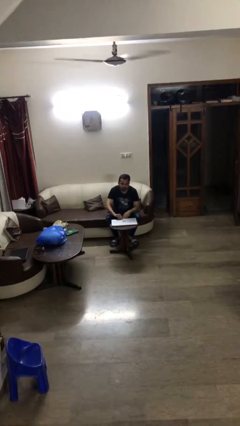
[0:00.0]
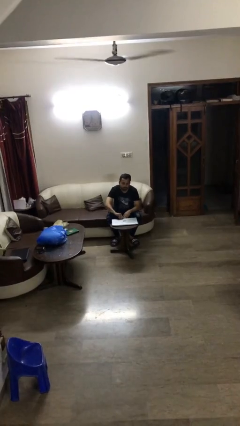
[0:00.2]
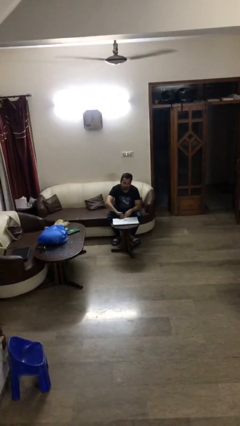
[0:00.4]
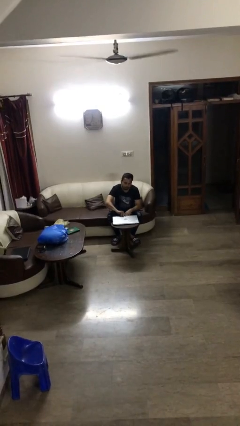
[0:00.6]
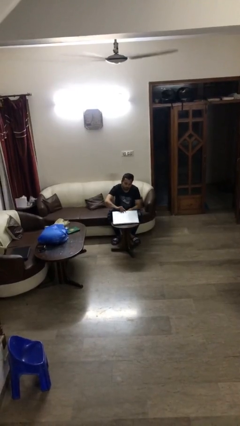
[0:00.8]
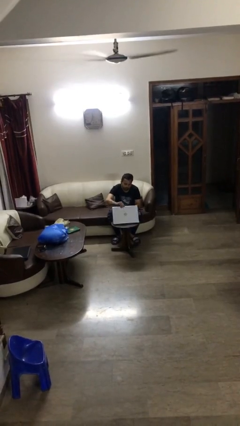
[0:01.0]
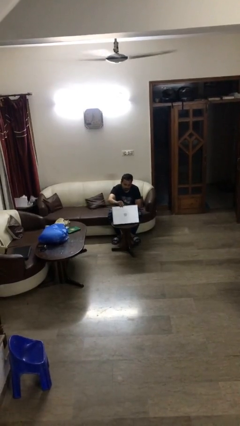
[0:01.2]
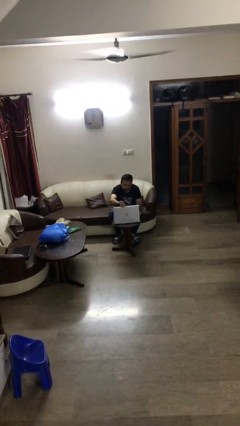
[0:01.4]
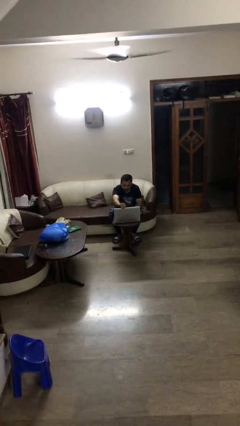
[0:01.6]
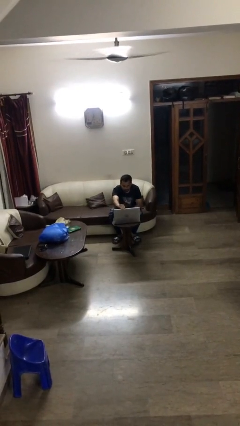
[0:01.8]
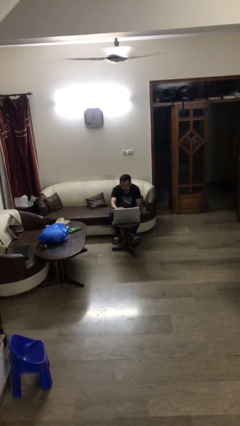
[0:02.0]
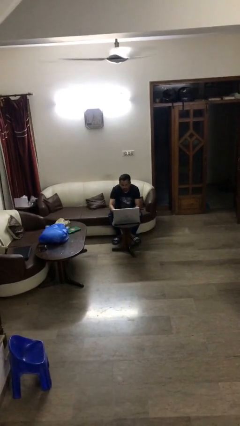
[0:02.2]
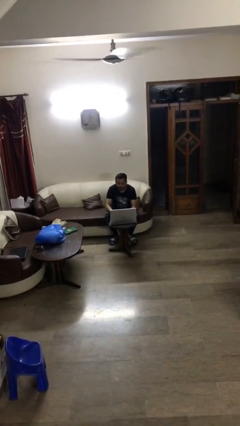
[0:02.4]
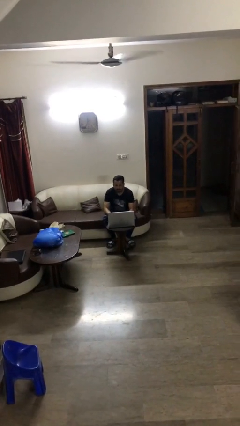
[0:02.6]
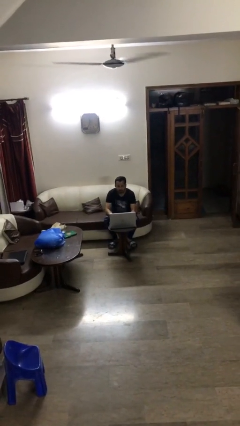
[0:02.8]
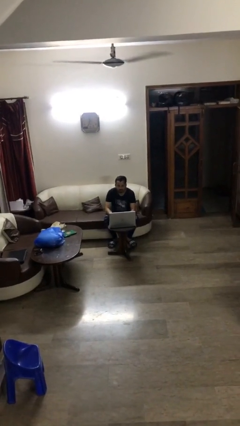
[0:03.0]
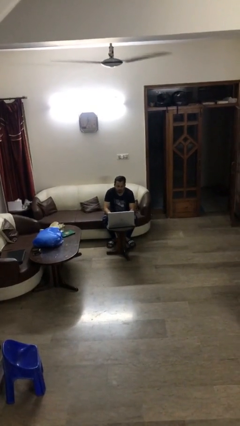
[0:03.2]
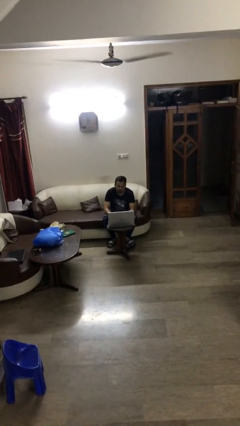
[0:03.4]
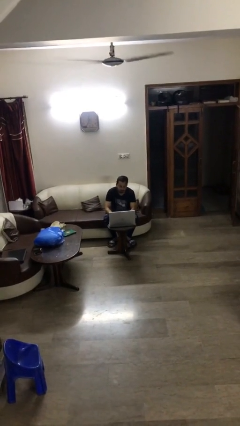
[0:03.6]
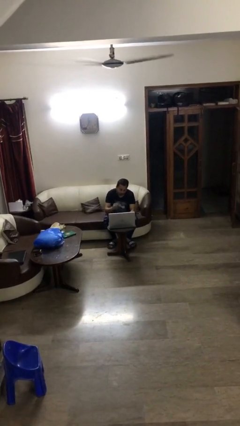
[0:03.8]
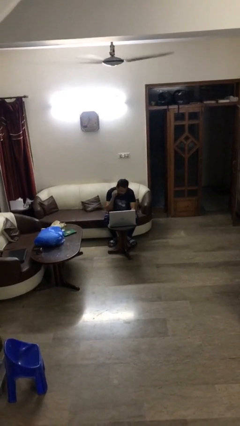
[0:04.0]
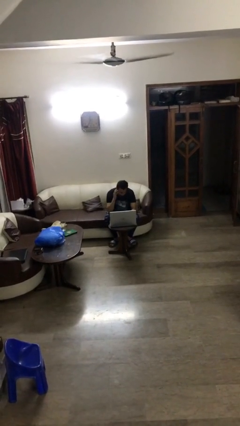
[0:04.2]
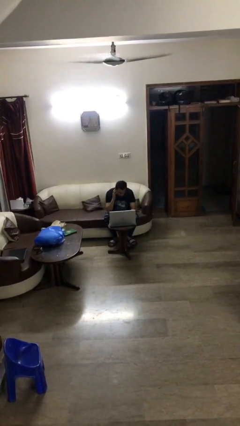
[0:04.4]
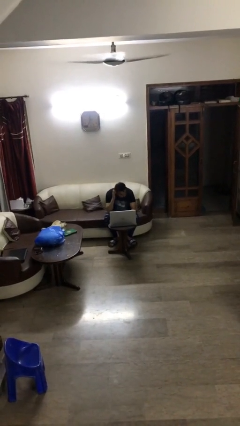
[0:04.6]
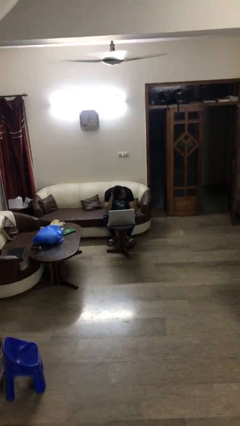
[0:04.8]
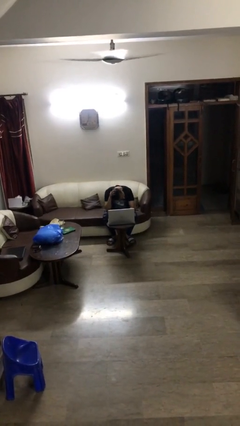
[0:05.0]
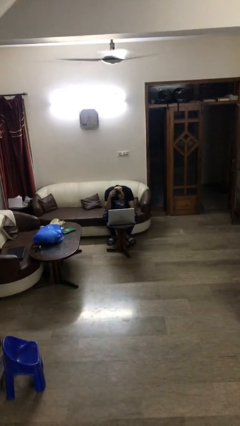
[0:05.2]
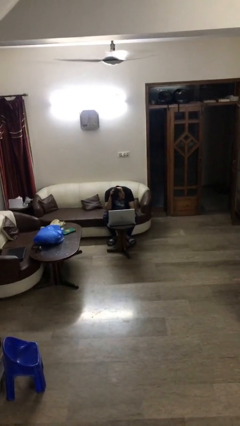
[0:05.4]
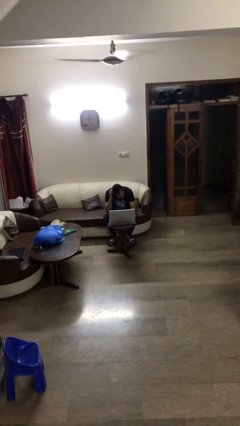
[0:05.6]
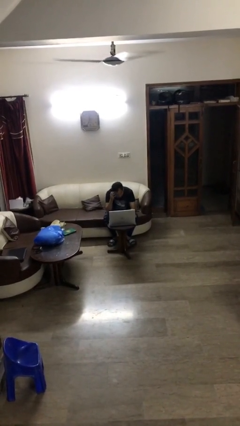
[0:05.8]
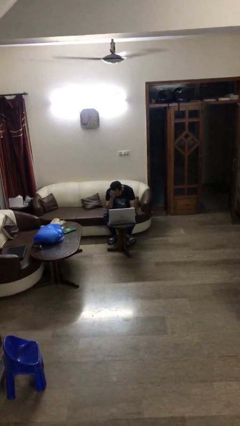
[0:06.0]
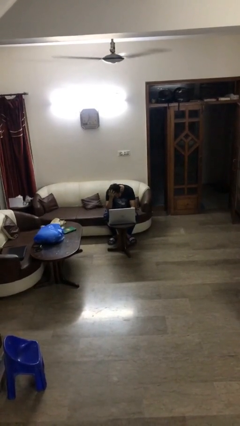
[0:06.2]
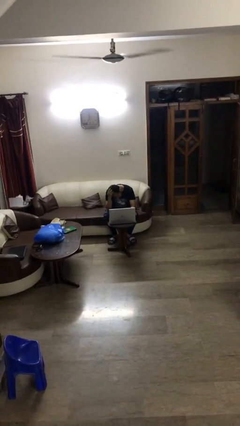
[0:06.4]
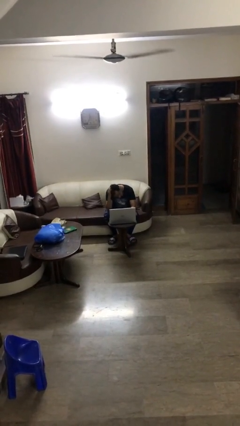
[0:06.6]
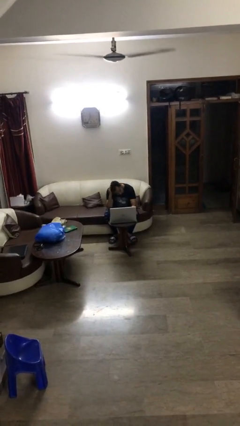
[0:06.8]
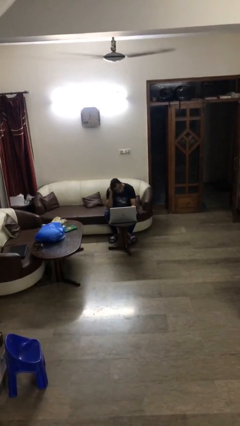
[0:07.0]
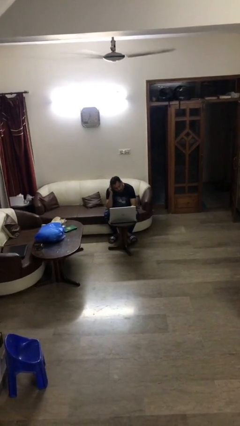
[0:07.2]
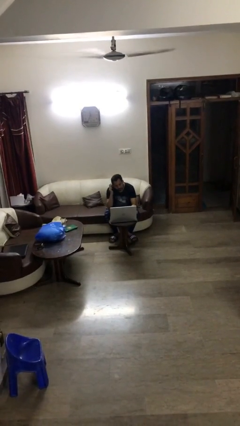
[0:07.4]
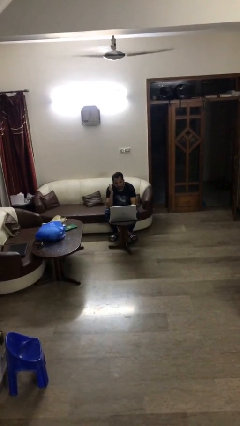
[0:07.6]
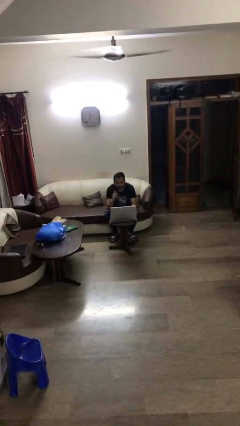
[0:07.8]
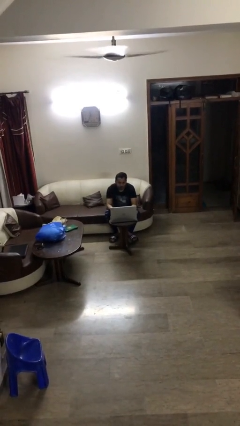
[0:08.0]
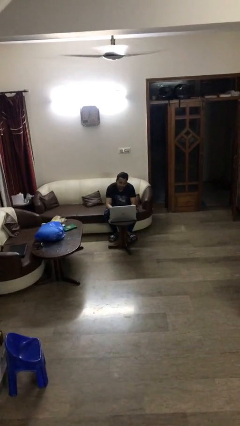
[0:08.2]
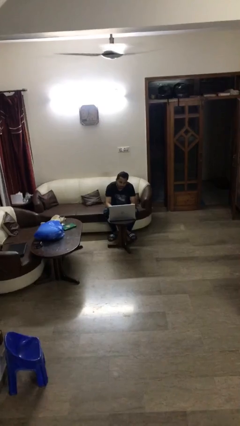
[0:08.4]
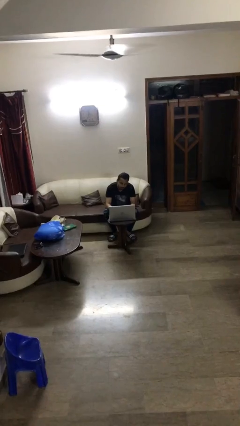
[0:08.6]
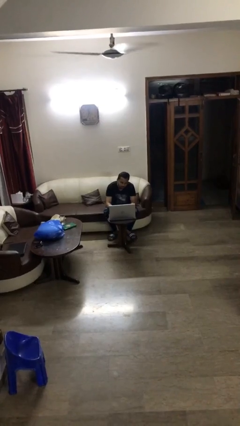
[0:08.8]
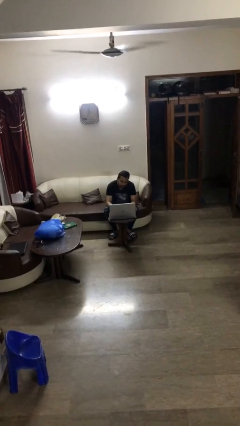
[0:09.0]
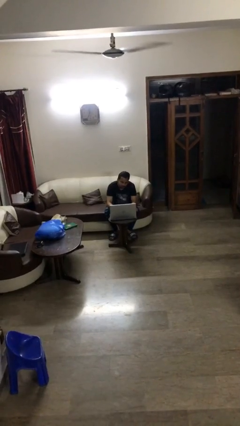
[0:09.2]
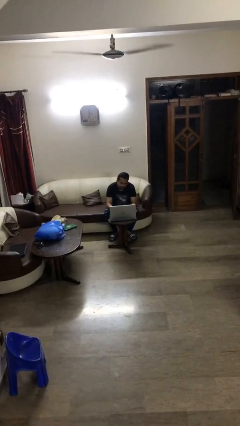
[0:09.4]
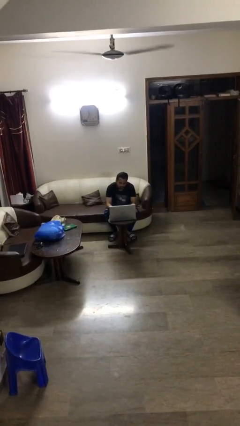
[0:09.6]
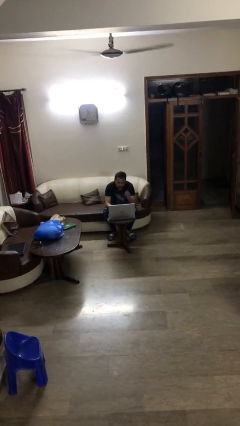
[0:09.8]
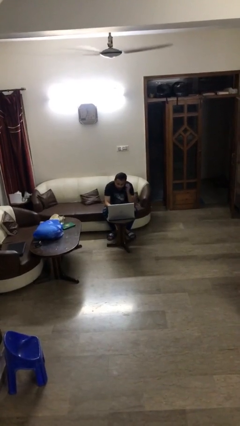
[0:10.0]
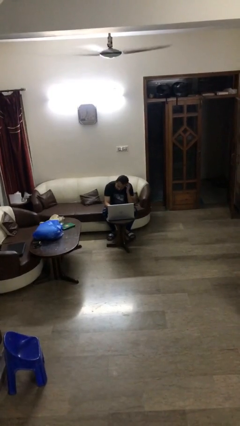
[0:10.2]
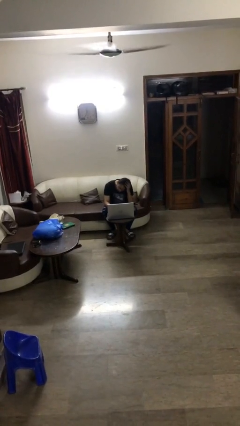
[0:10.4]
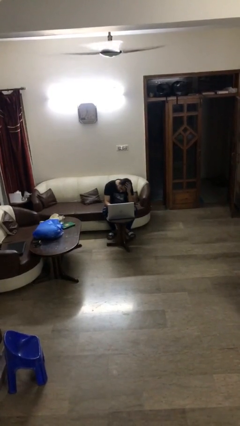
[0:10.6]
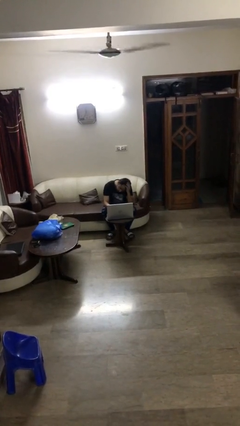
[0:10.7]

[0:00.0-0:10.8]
person interacts with laptop

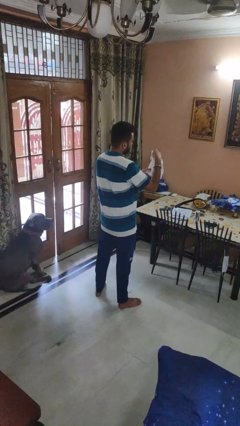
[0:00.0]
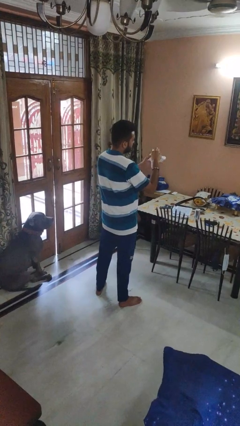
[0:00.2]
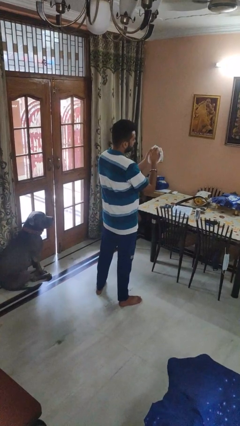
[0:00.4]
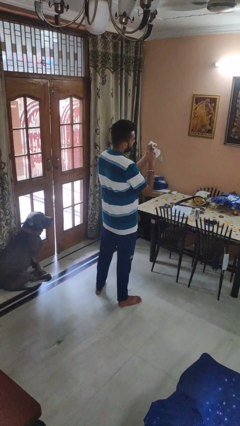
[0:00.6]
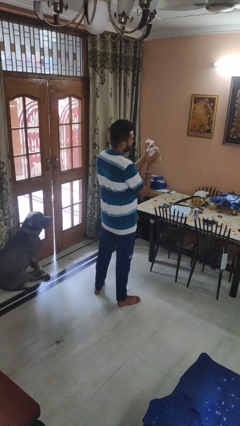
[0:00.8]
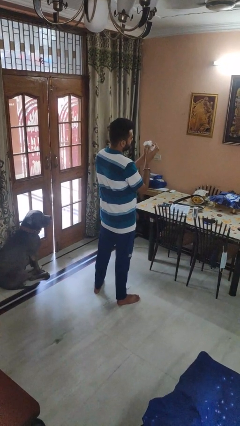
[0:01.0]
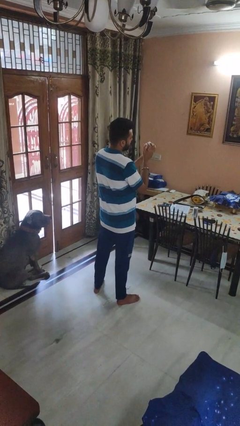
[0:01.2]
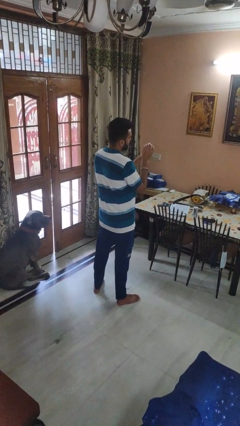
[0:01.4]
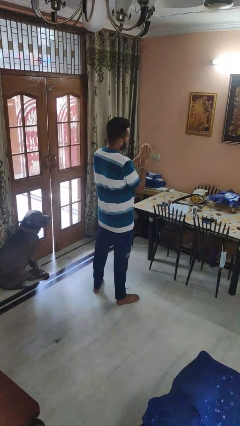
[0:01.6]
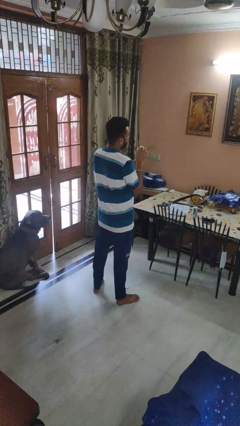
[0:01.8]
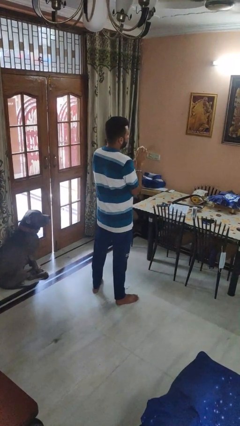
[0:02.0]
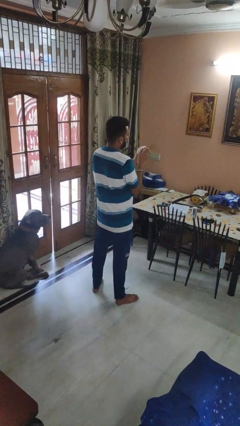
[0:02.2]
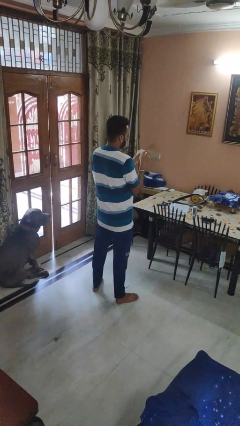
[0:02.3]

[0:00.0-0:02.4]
person crumples paper

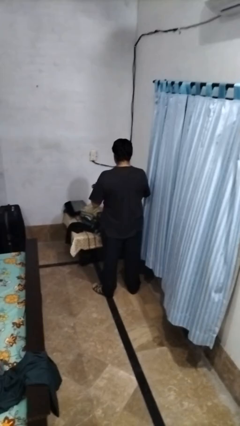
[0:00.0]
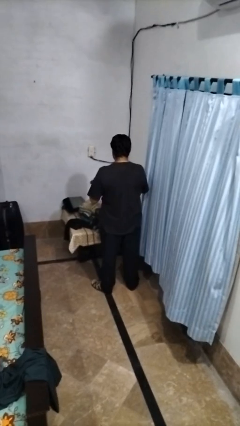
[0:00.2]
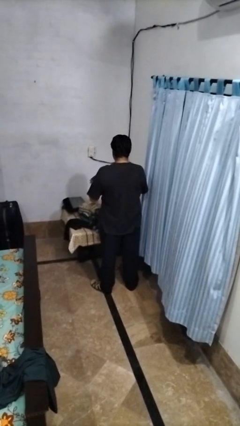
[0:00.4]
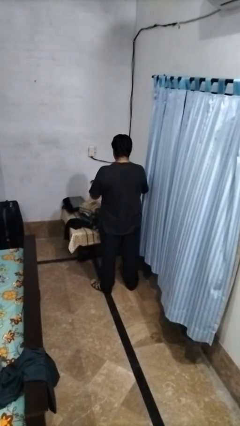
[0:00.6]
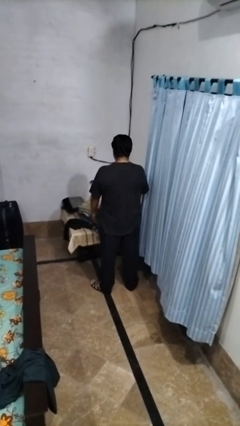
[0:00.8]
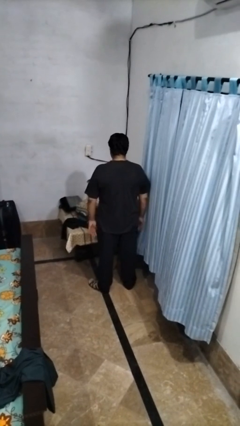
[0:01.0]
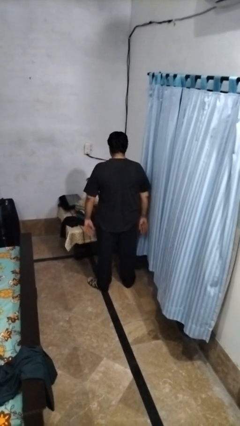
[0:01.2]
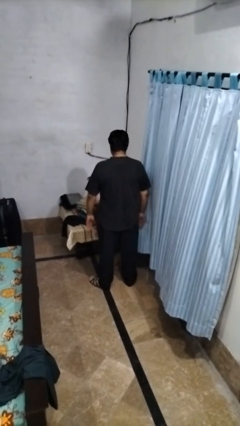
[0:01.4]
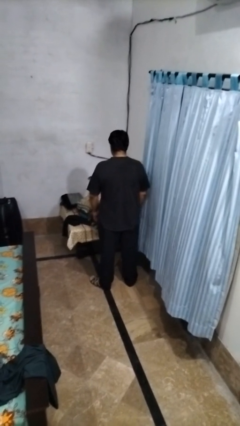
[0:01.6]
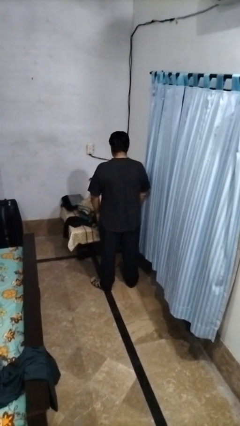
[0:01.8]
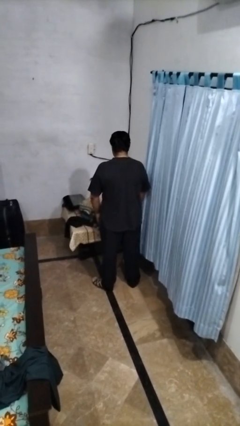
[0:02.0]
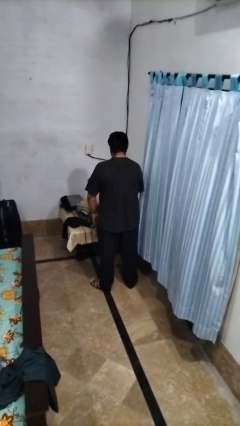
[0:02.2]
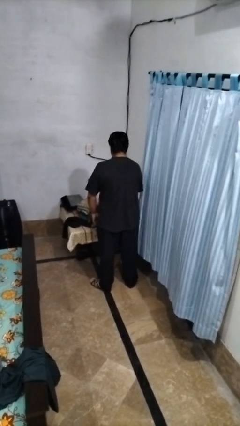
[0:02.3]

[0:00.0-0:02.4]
person loads clothes into suitcase

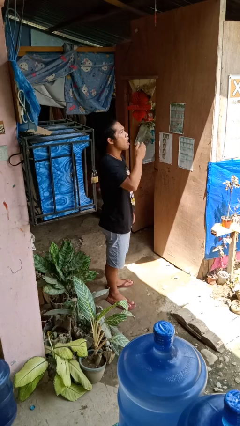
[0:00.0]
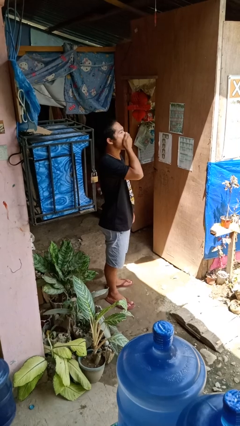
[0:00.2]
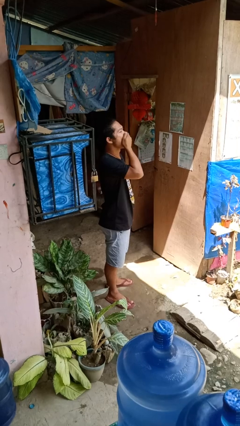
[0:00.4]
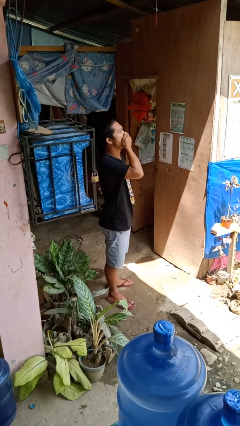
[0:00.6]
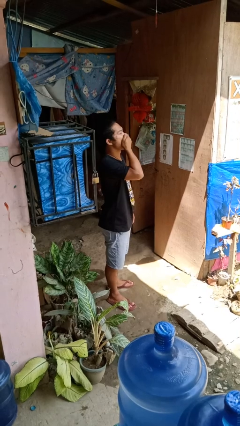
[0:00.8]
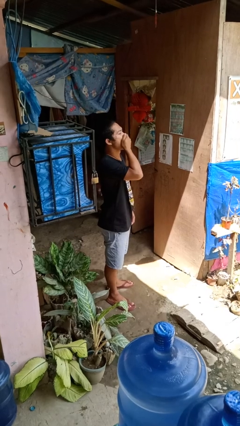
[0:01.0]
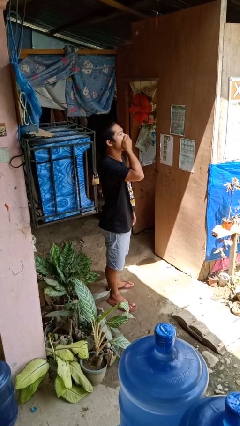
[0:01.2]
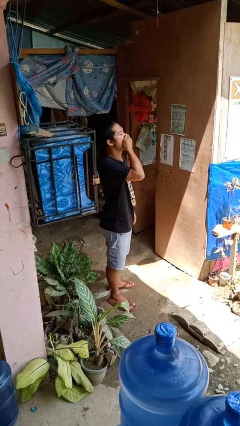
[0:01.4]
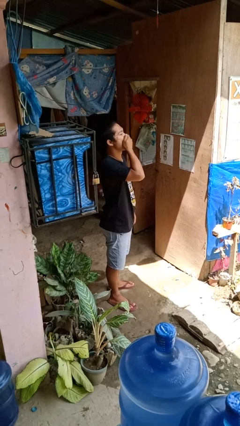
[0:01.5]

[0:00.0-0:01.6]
person yawns

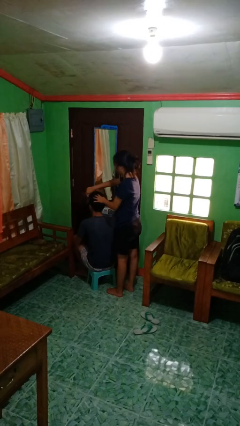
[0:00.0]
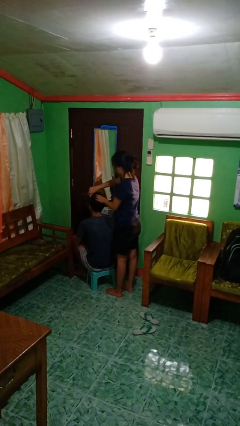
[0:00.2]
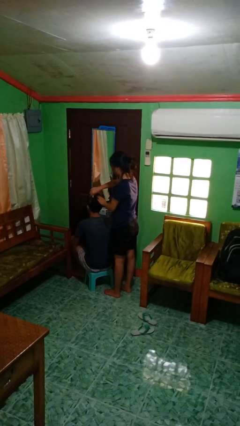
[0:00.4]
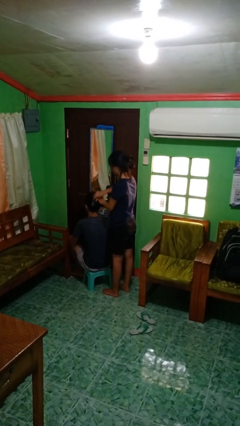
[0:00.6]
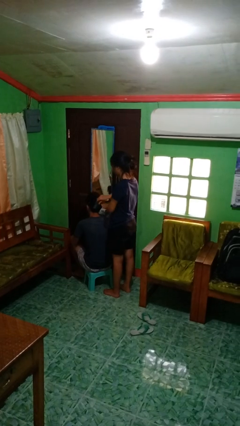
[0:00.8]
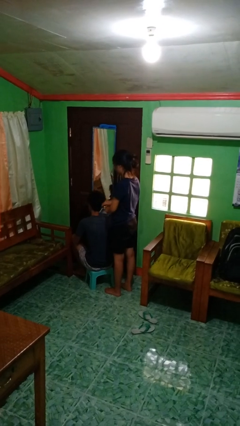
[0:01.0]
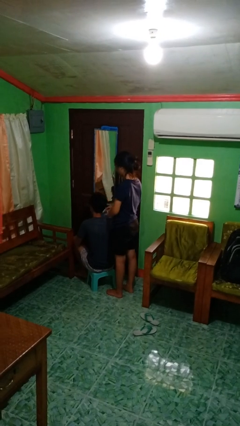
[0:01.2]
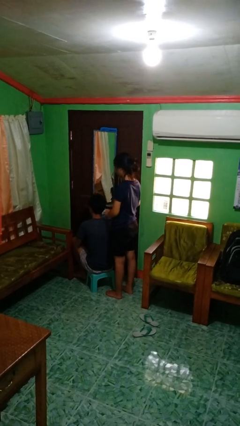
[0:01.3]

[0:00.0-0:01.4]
person brushes hair of person
